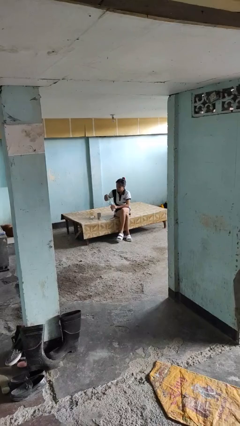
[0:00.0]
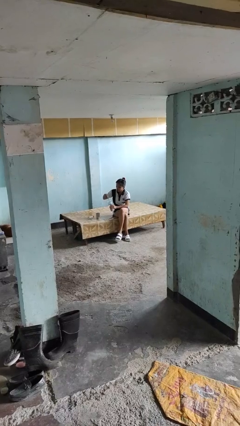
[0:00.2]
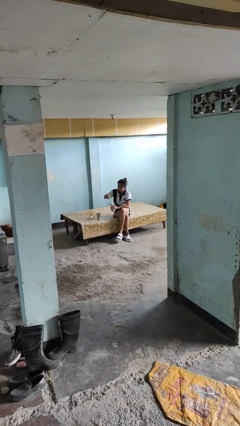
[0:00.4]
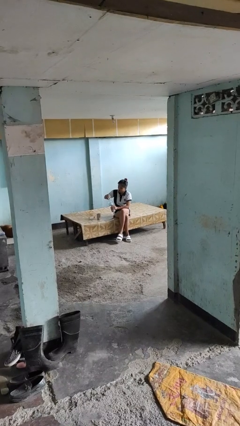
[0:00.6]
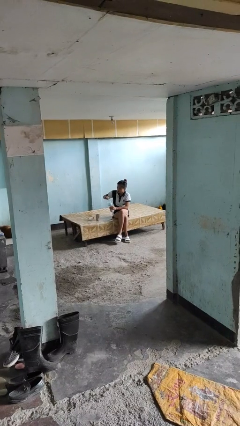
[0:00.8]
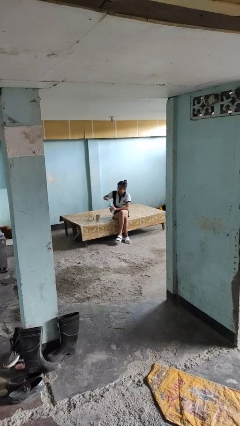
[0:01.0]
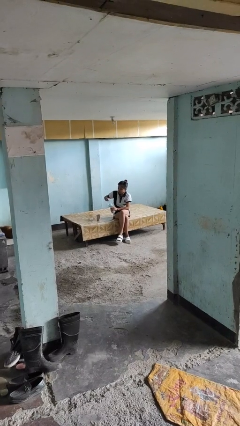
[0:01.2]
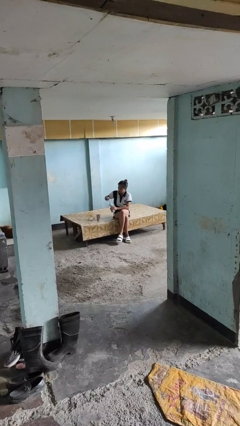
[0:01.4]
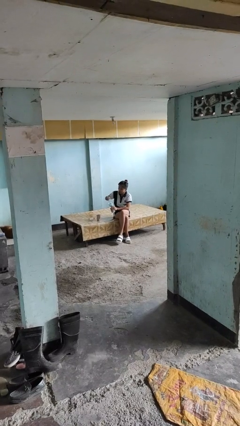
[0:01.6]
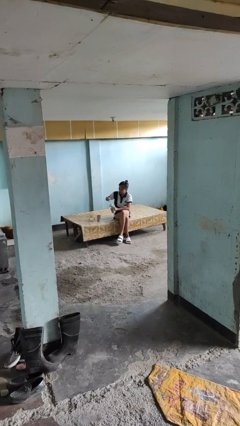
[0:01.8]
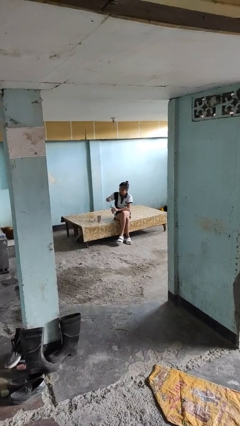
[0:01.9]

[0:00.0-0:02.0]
person screws lid to bottle

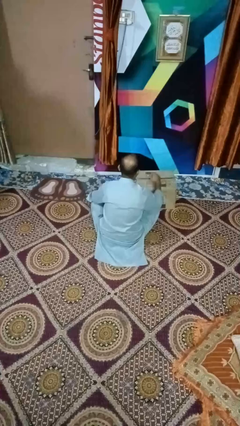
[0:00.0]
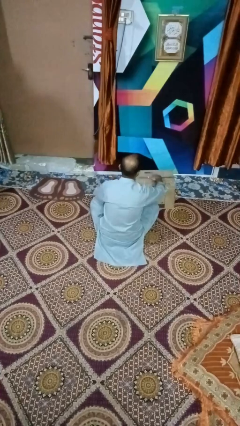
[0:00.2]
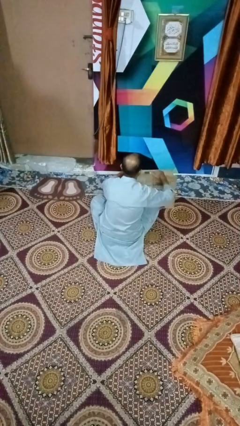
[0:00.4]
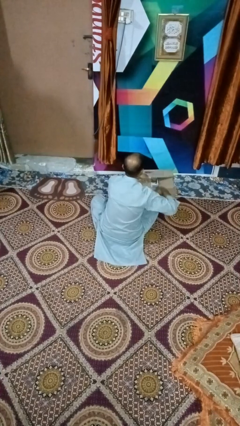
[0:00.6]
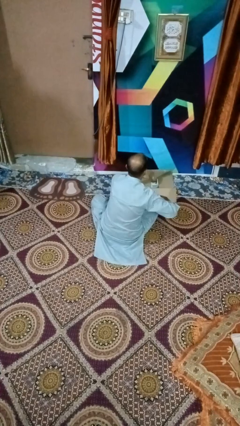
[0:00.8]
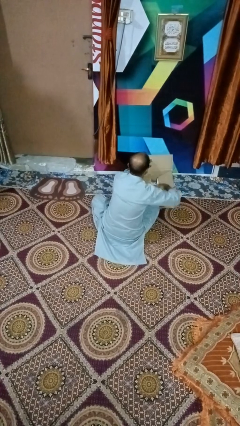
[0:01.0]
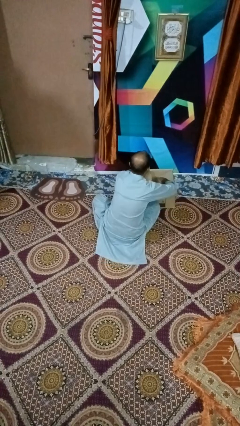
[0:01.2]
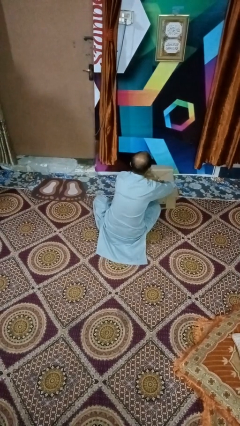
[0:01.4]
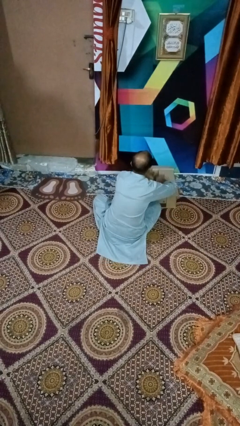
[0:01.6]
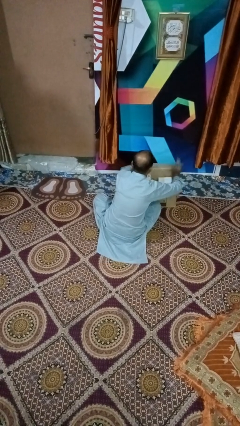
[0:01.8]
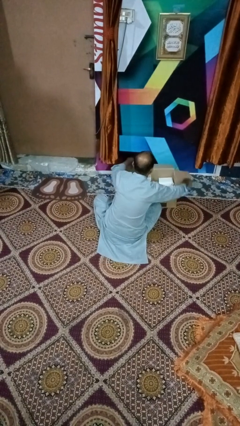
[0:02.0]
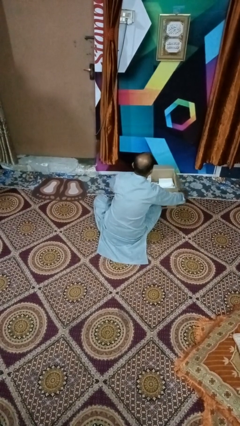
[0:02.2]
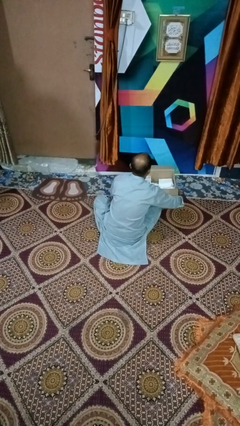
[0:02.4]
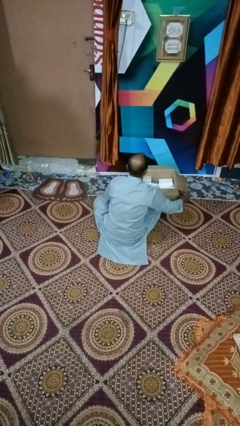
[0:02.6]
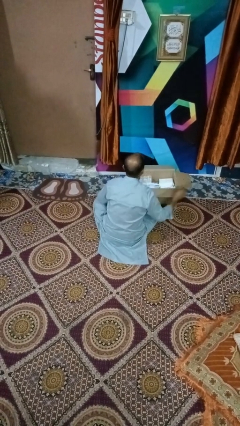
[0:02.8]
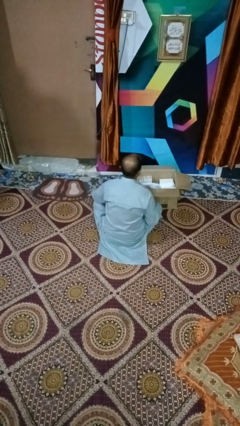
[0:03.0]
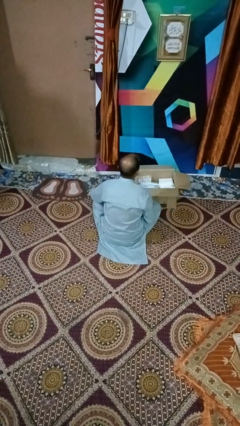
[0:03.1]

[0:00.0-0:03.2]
person opens box

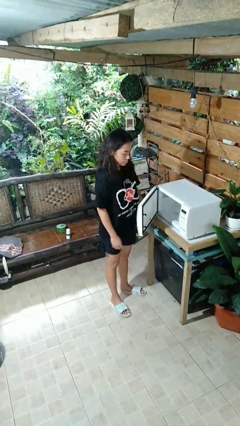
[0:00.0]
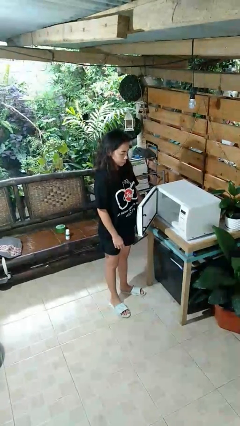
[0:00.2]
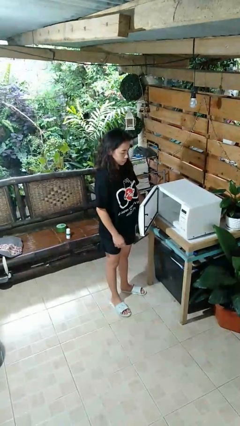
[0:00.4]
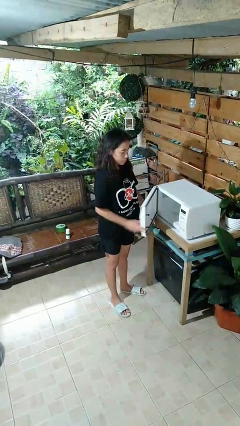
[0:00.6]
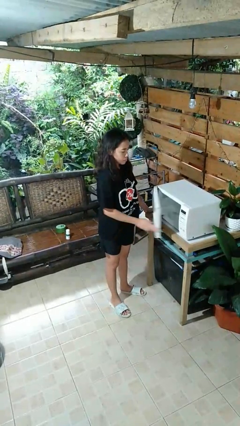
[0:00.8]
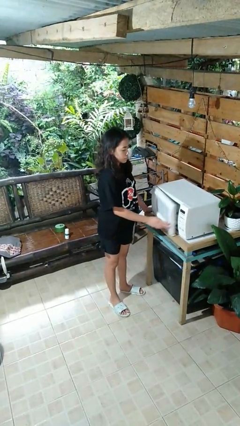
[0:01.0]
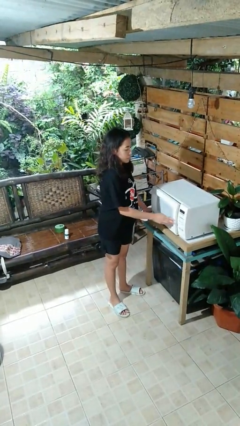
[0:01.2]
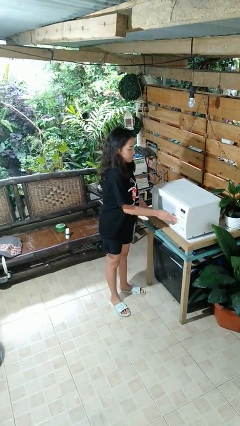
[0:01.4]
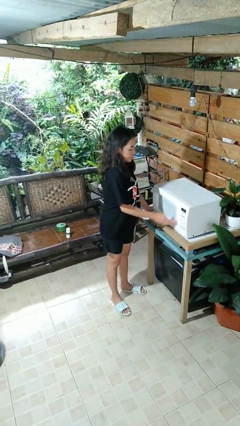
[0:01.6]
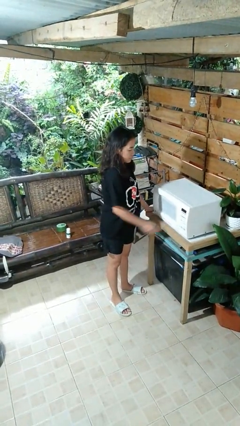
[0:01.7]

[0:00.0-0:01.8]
person closes microwave

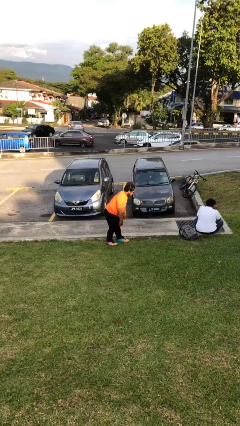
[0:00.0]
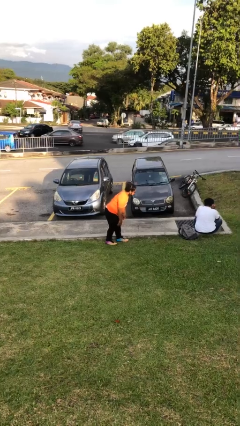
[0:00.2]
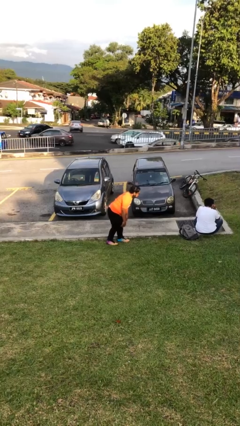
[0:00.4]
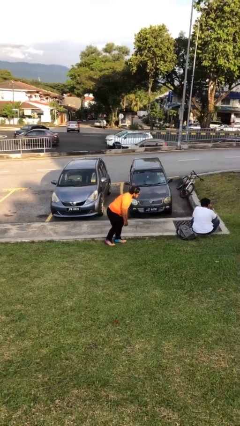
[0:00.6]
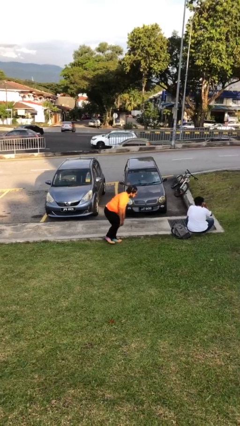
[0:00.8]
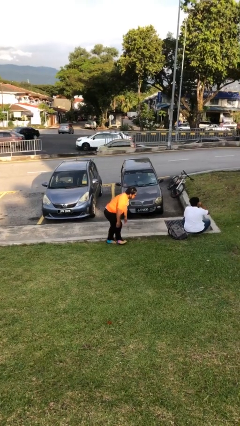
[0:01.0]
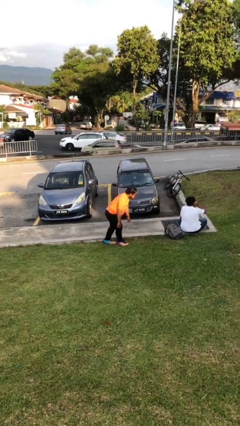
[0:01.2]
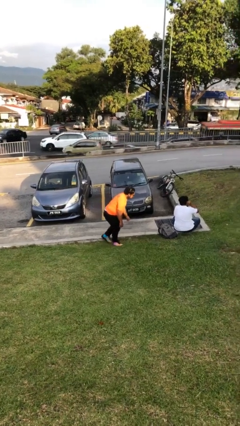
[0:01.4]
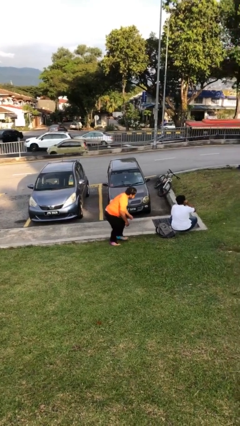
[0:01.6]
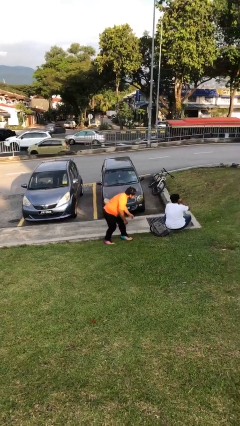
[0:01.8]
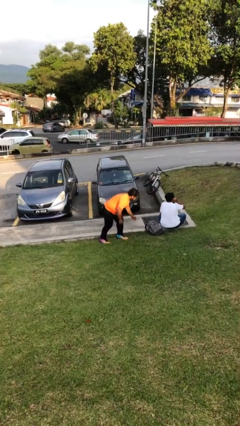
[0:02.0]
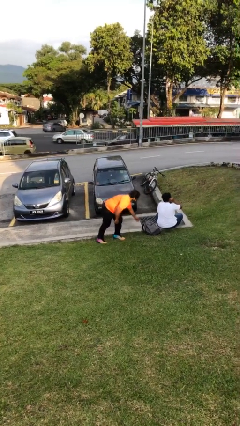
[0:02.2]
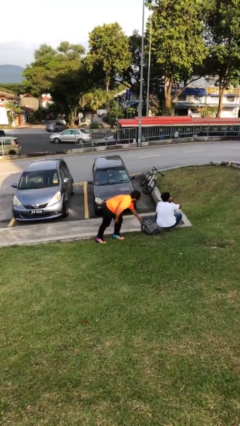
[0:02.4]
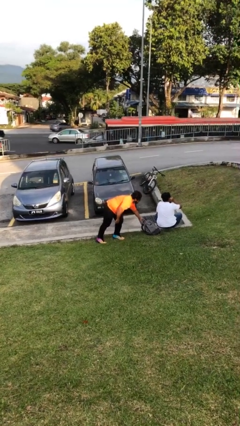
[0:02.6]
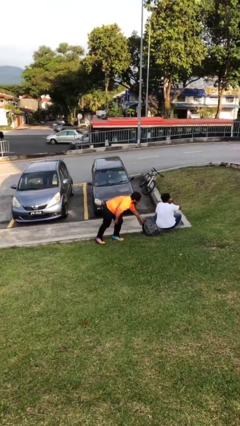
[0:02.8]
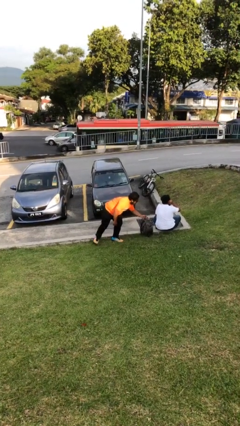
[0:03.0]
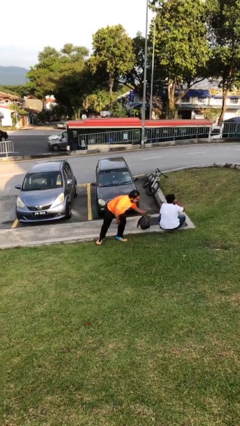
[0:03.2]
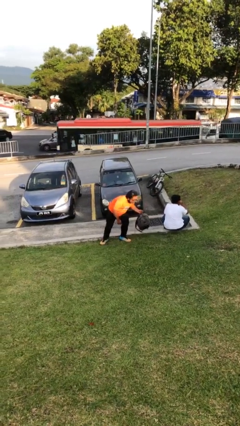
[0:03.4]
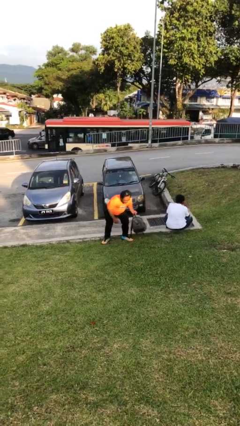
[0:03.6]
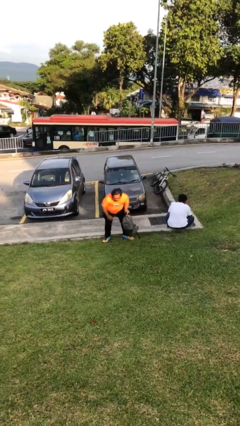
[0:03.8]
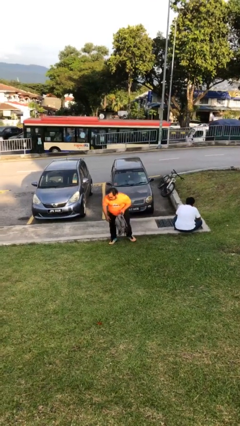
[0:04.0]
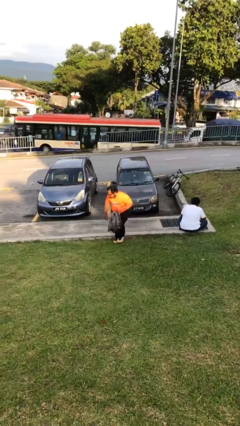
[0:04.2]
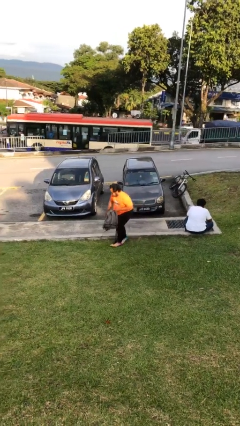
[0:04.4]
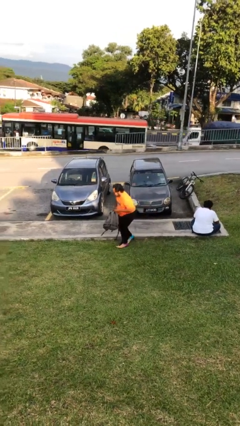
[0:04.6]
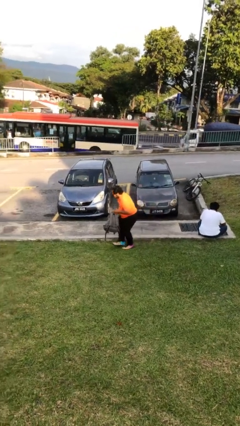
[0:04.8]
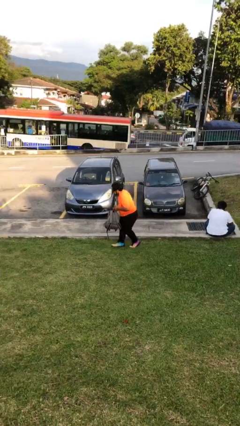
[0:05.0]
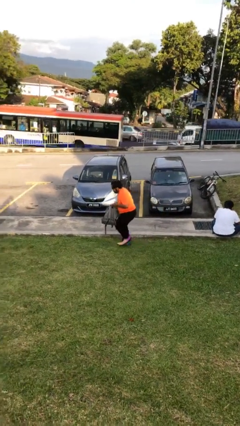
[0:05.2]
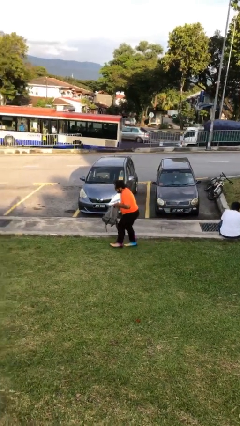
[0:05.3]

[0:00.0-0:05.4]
person steals object from person

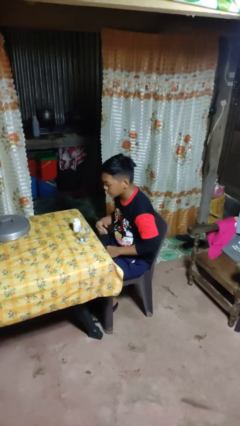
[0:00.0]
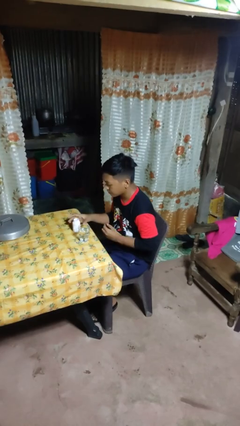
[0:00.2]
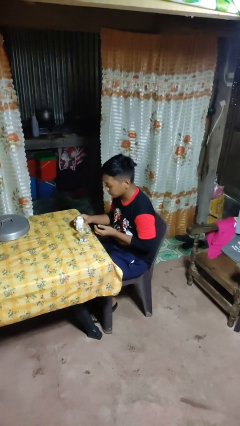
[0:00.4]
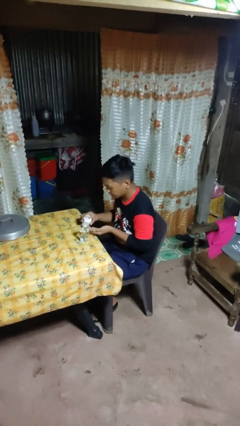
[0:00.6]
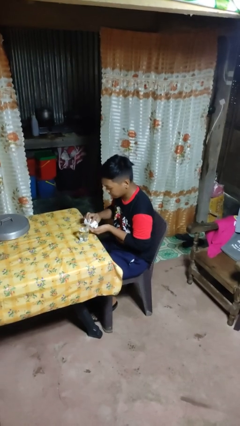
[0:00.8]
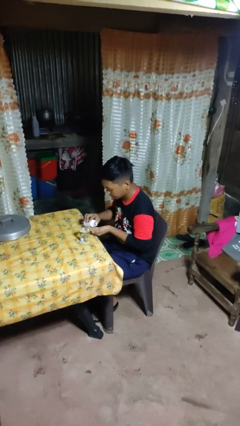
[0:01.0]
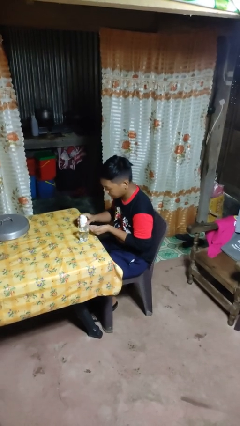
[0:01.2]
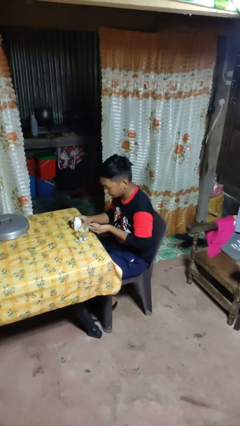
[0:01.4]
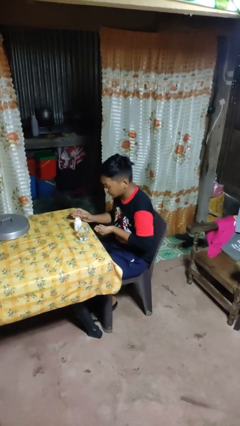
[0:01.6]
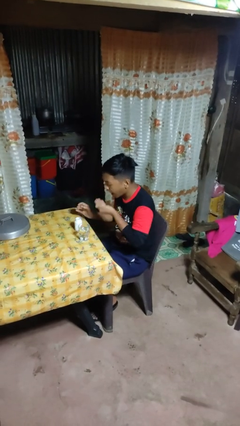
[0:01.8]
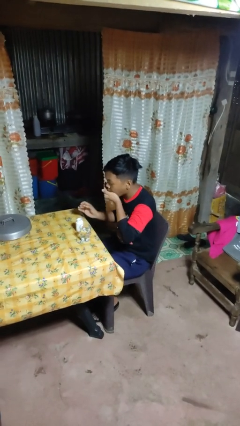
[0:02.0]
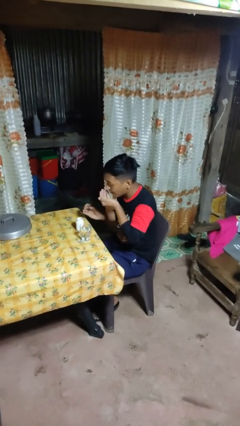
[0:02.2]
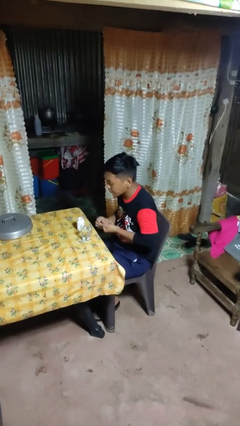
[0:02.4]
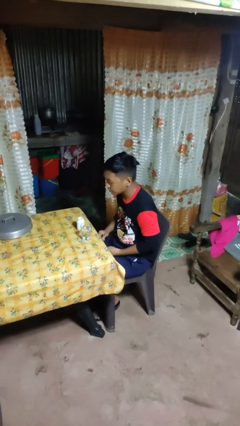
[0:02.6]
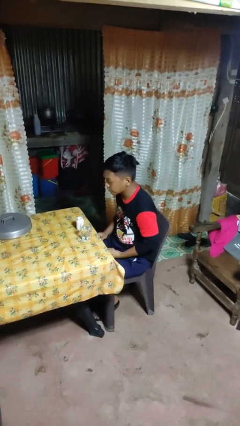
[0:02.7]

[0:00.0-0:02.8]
person takes medicine pills

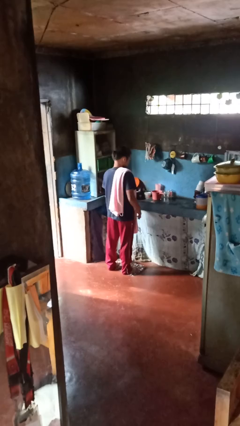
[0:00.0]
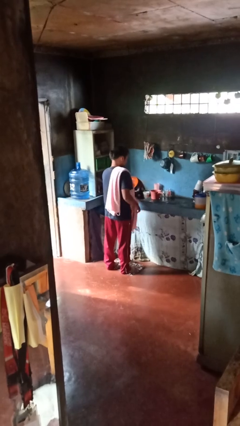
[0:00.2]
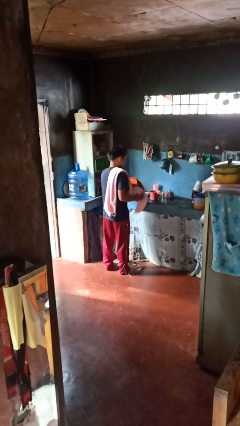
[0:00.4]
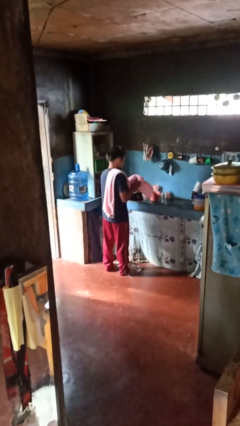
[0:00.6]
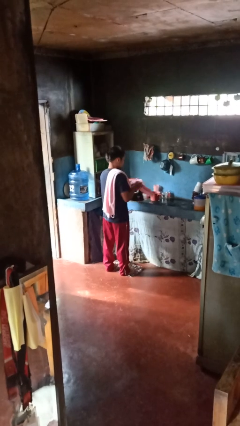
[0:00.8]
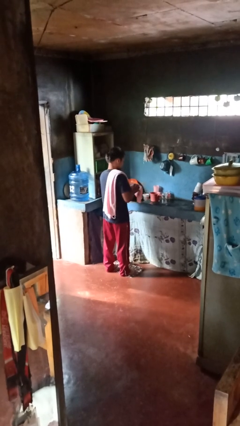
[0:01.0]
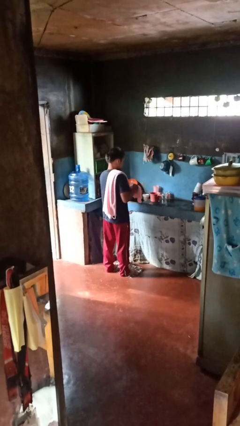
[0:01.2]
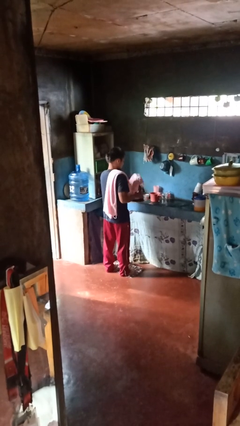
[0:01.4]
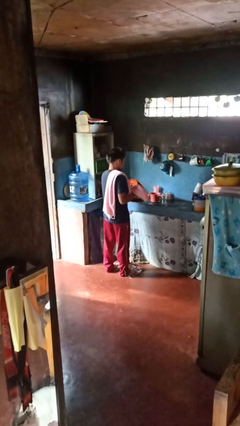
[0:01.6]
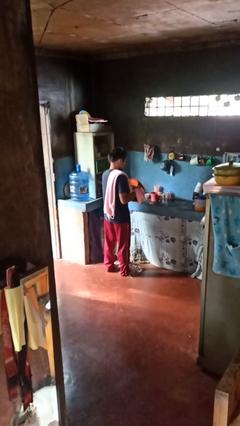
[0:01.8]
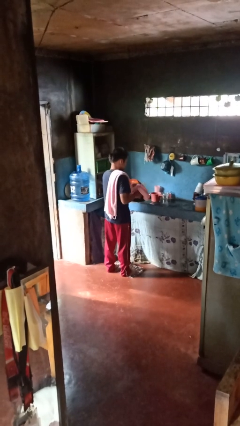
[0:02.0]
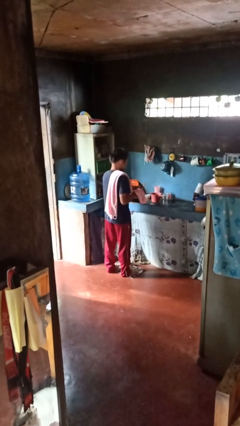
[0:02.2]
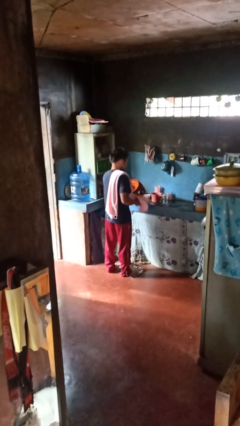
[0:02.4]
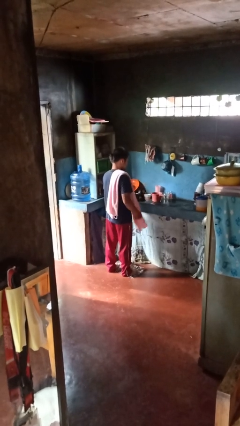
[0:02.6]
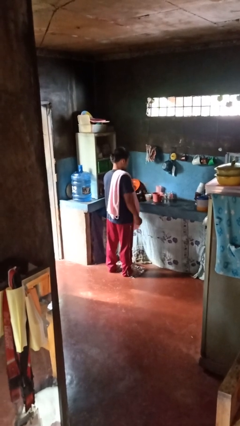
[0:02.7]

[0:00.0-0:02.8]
person dries hands with towel
